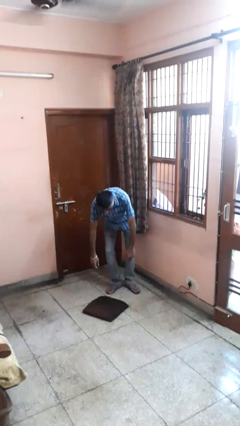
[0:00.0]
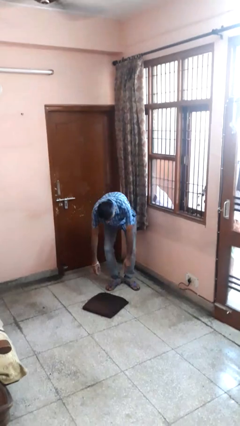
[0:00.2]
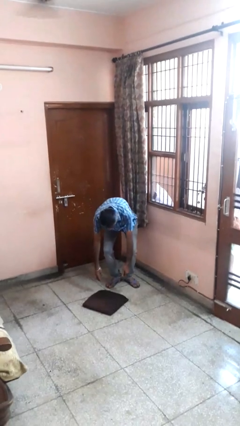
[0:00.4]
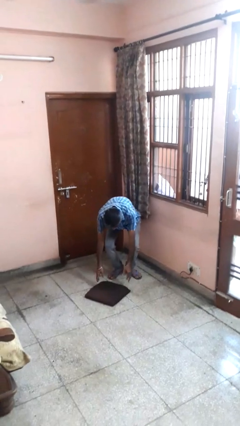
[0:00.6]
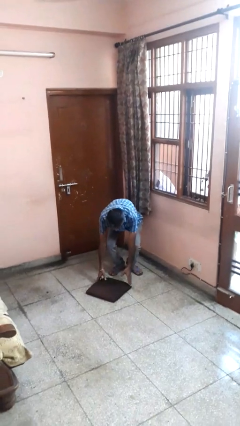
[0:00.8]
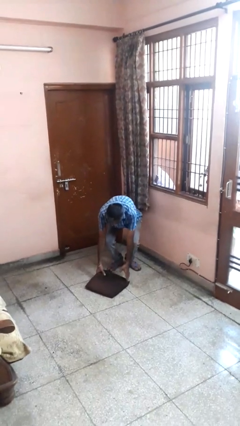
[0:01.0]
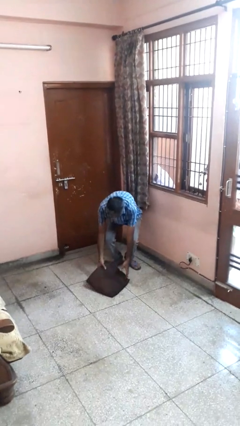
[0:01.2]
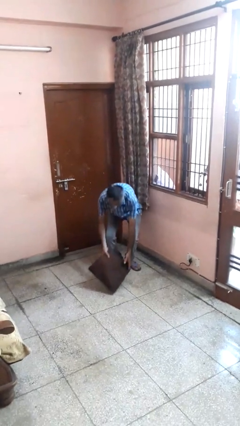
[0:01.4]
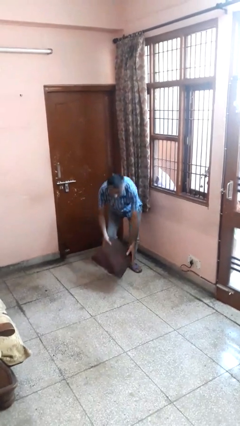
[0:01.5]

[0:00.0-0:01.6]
person picks up object from floor

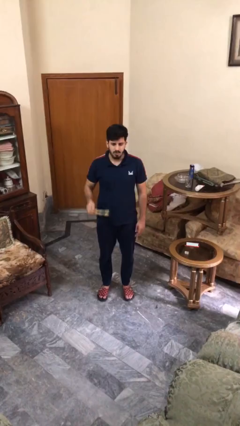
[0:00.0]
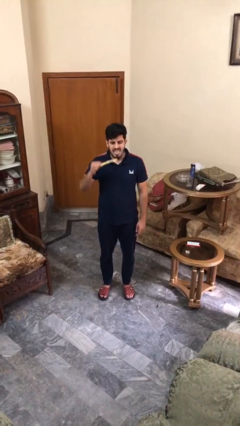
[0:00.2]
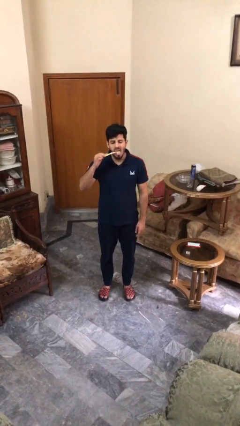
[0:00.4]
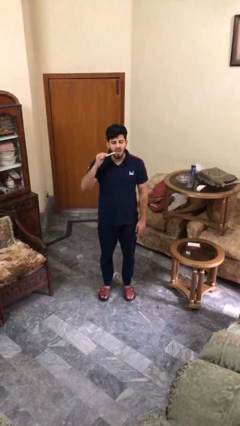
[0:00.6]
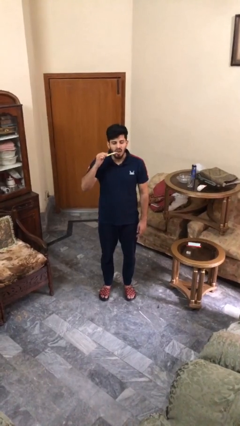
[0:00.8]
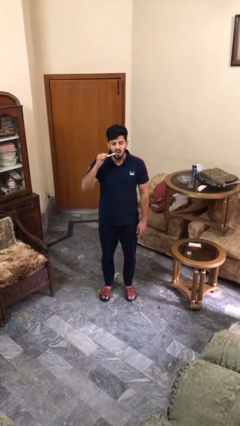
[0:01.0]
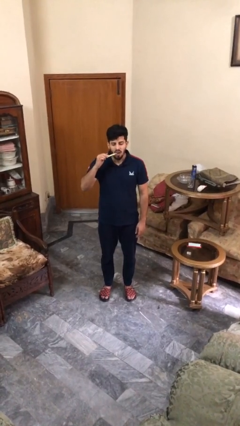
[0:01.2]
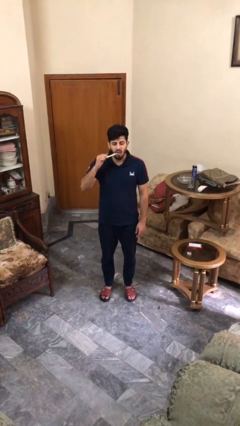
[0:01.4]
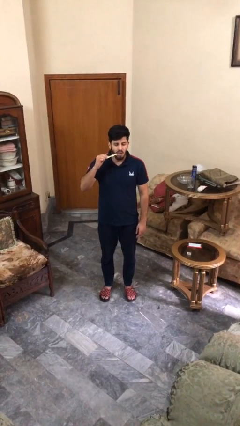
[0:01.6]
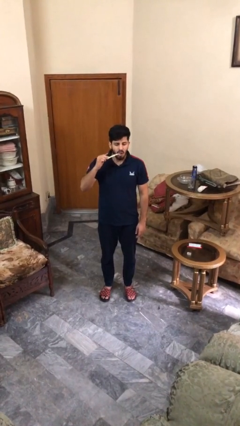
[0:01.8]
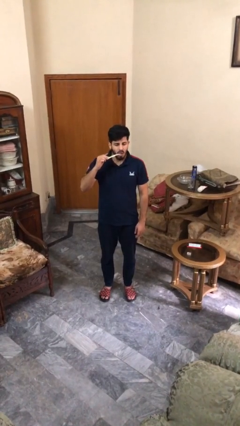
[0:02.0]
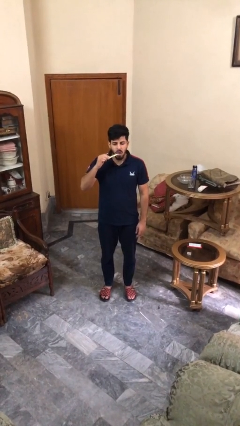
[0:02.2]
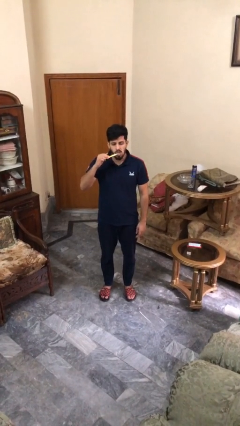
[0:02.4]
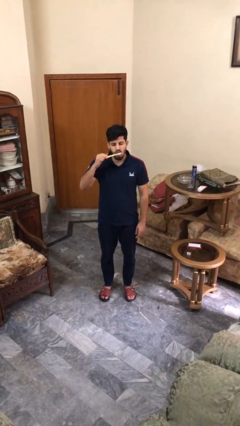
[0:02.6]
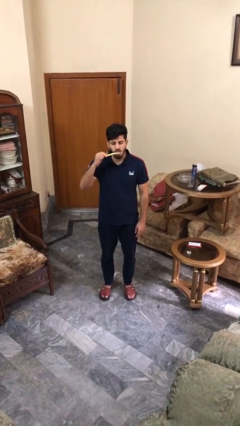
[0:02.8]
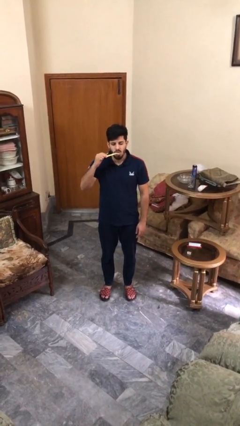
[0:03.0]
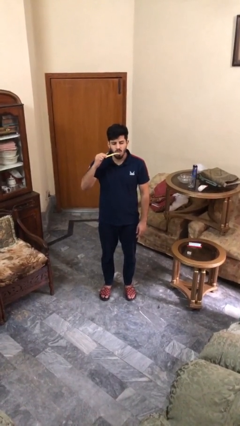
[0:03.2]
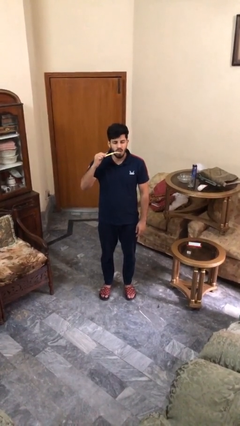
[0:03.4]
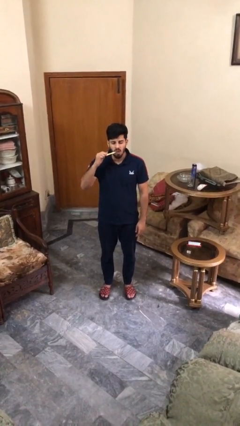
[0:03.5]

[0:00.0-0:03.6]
person brushes teeth

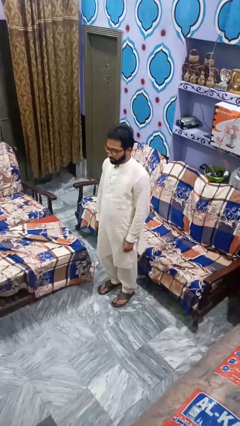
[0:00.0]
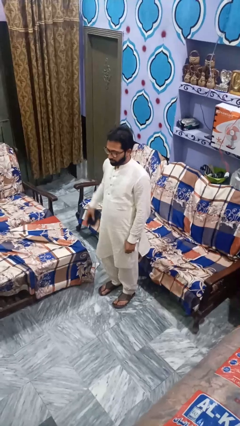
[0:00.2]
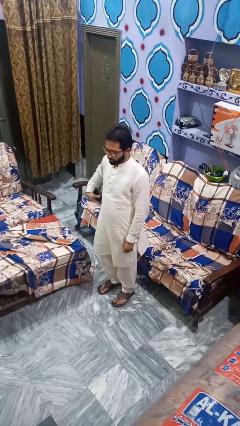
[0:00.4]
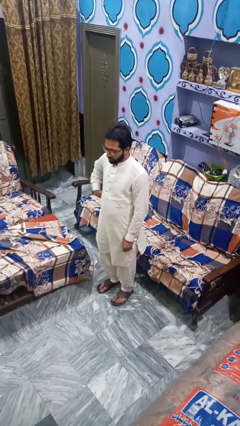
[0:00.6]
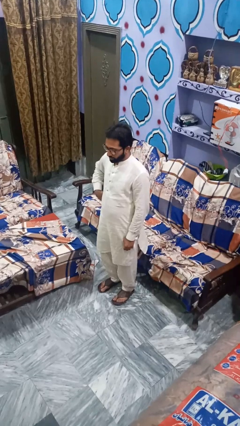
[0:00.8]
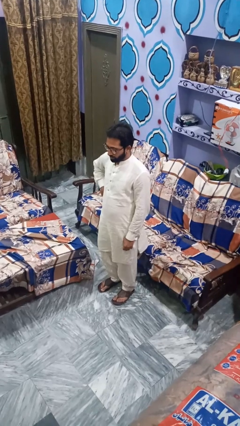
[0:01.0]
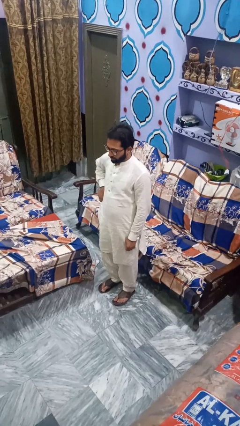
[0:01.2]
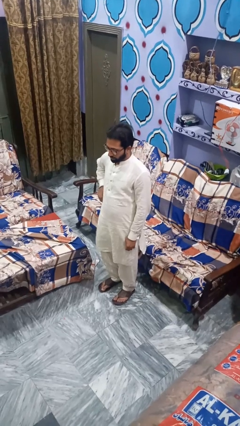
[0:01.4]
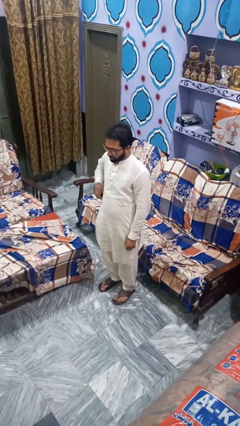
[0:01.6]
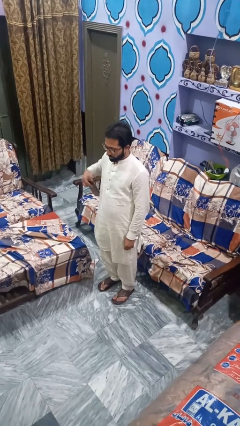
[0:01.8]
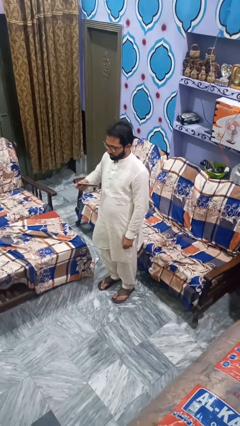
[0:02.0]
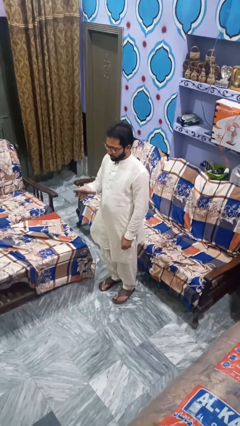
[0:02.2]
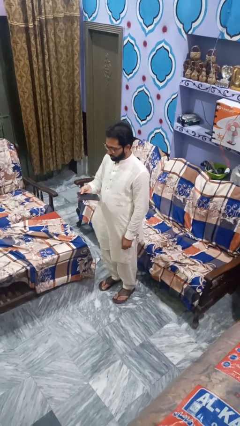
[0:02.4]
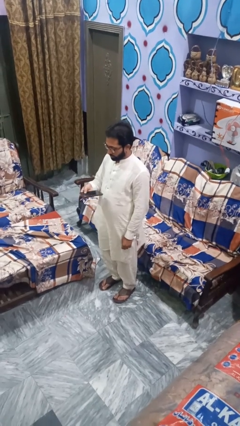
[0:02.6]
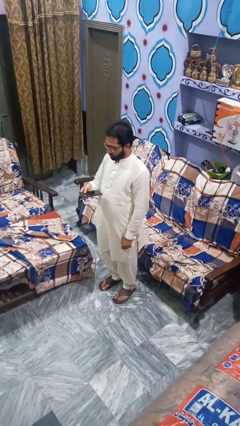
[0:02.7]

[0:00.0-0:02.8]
person takes phone from pocket

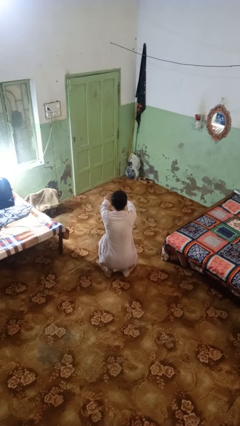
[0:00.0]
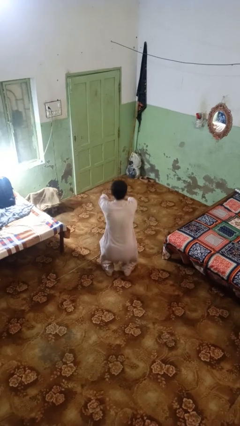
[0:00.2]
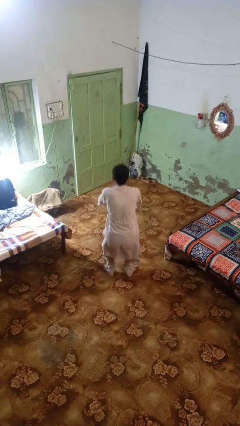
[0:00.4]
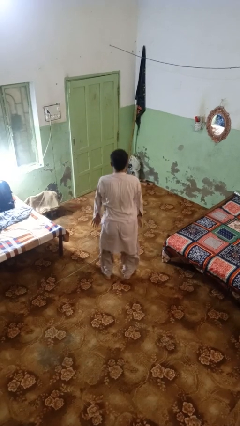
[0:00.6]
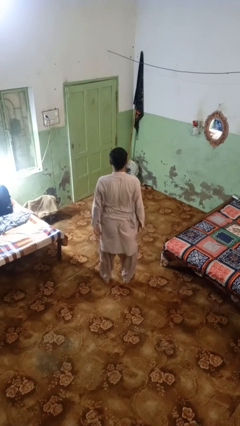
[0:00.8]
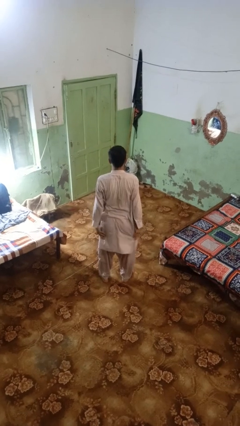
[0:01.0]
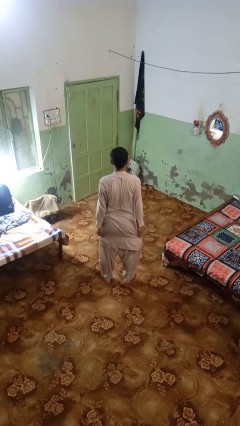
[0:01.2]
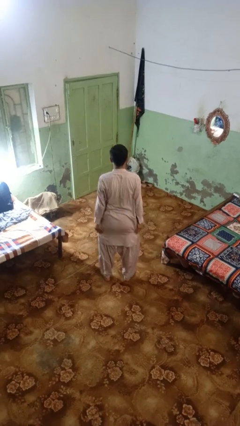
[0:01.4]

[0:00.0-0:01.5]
person stands up

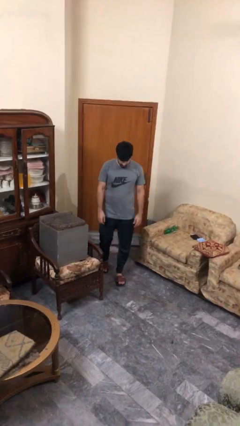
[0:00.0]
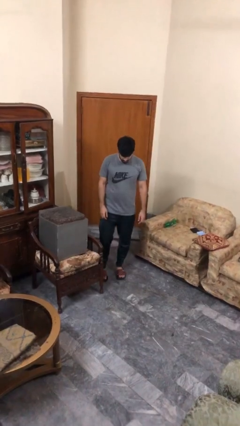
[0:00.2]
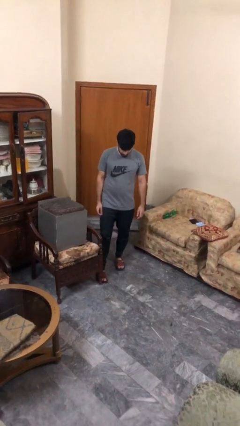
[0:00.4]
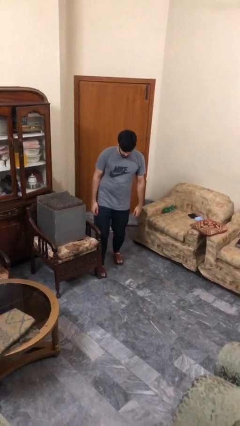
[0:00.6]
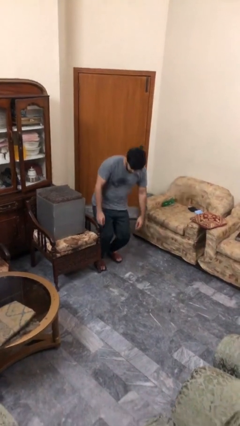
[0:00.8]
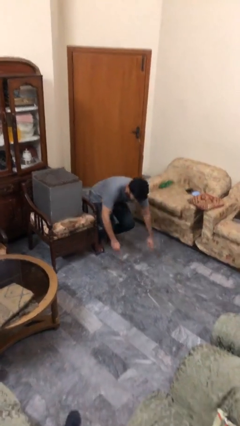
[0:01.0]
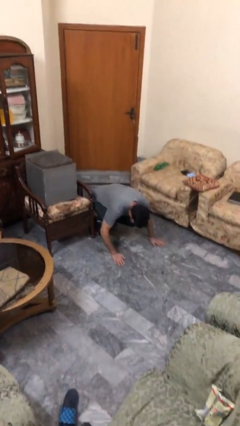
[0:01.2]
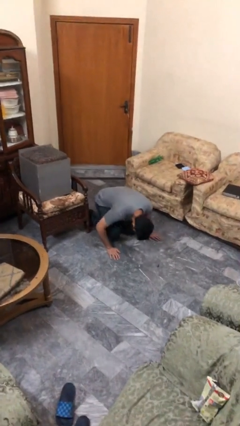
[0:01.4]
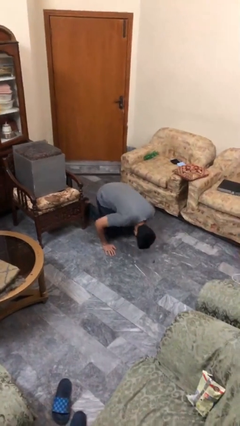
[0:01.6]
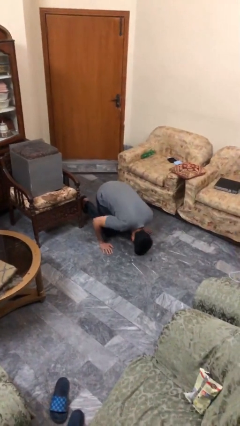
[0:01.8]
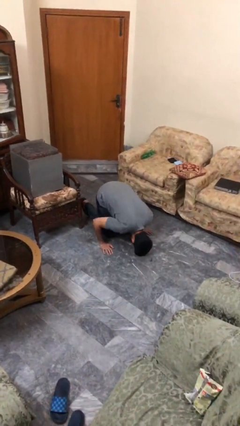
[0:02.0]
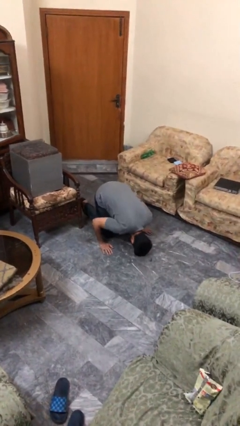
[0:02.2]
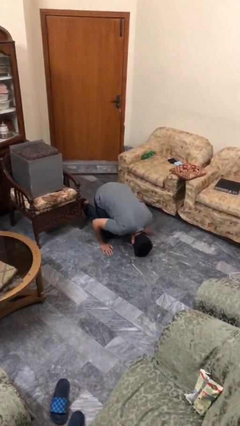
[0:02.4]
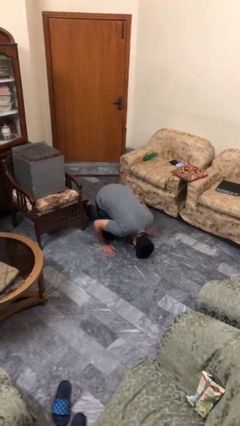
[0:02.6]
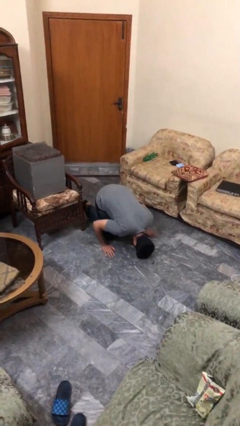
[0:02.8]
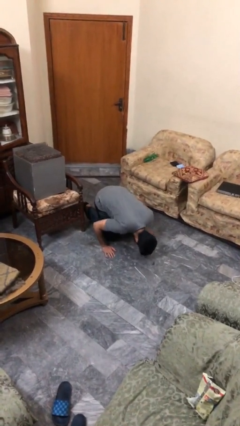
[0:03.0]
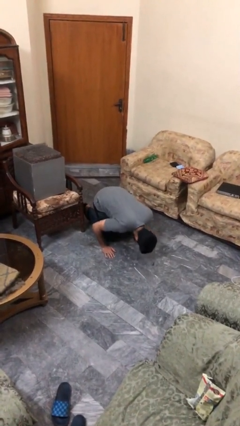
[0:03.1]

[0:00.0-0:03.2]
person trips on object on floor

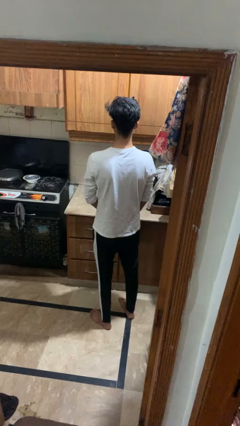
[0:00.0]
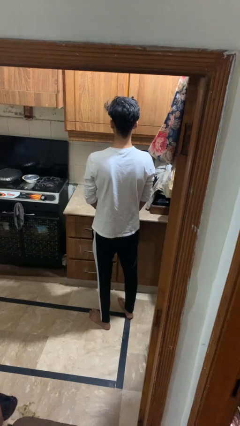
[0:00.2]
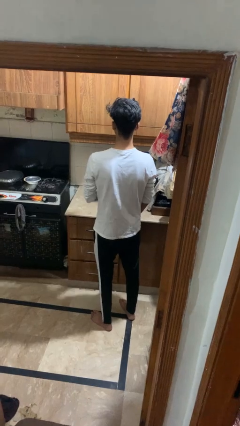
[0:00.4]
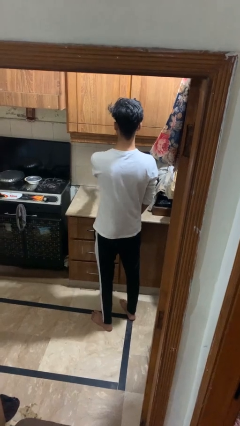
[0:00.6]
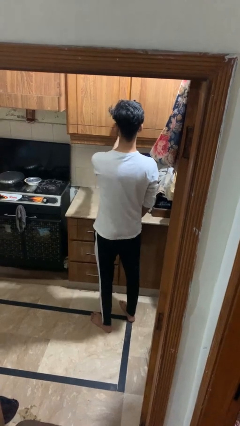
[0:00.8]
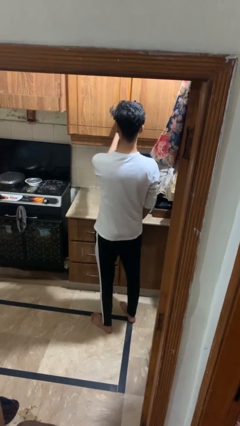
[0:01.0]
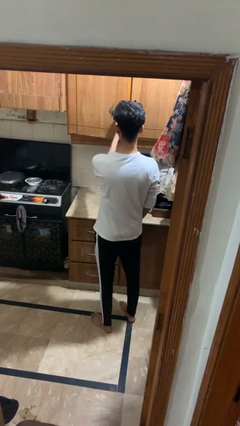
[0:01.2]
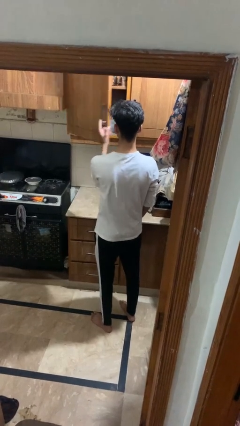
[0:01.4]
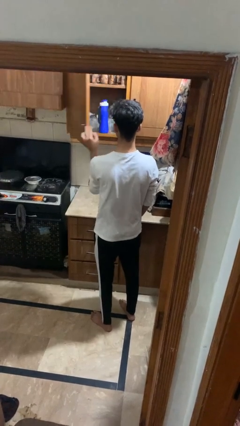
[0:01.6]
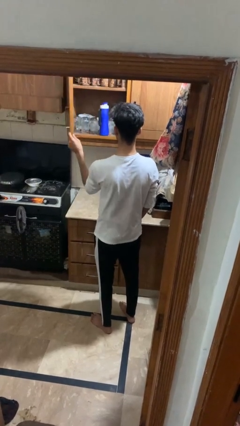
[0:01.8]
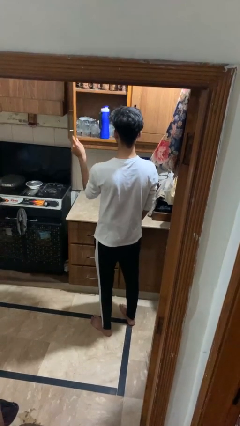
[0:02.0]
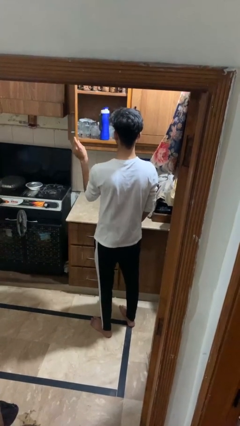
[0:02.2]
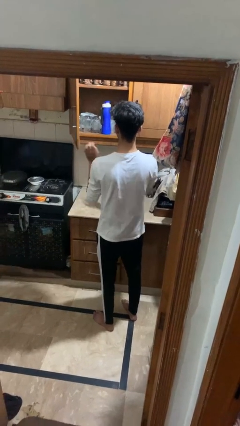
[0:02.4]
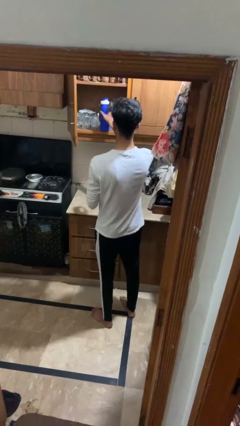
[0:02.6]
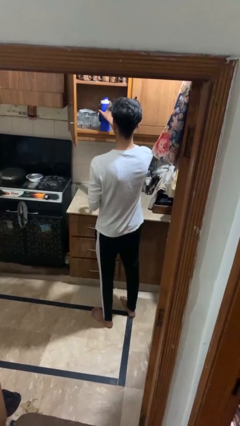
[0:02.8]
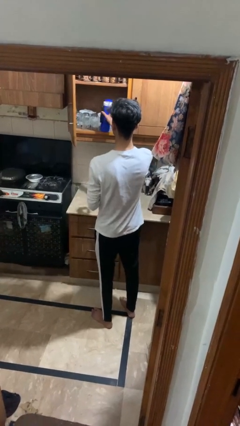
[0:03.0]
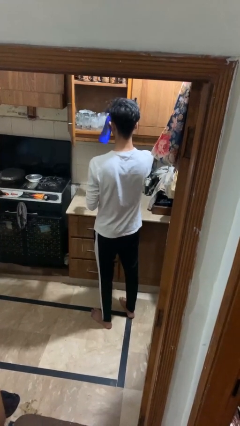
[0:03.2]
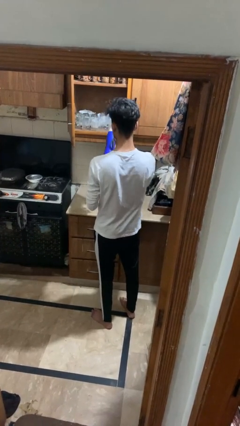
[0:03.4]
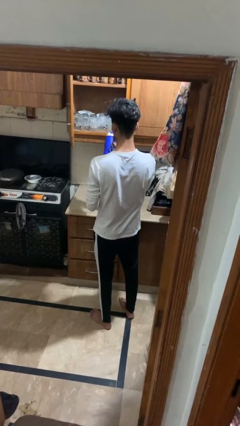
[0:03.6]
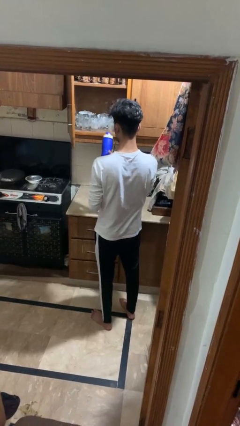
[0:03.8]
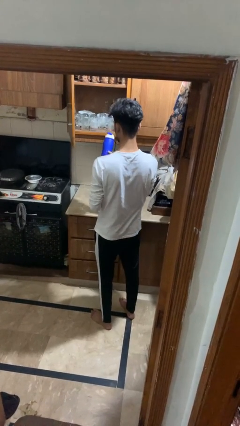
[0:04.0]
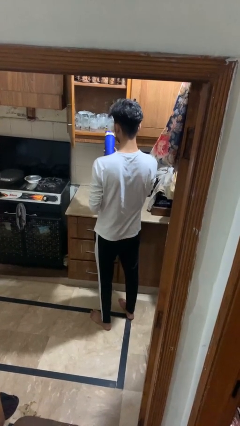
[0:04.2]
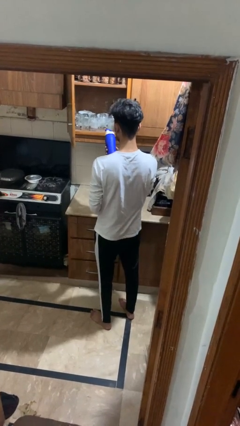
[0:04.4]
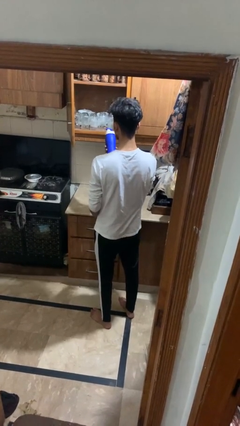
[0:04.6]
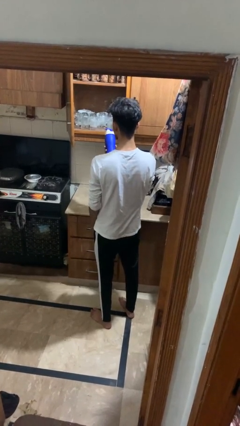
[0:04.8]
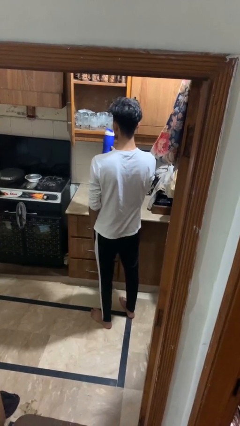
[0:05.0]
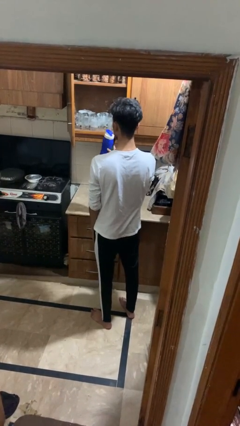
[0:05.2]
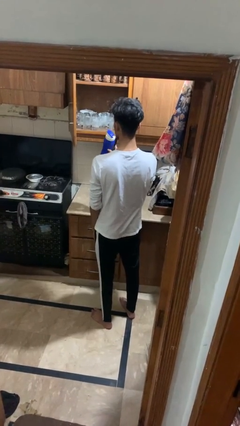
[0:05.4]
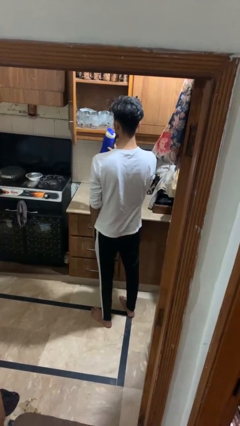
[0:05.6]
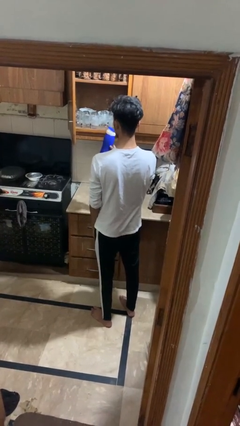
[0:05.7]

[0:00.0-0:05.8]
person puts object in cabinet
